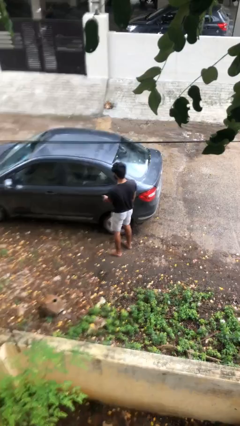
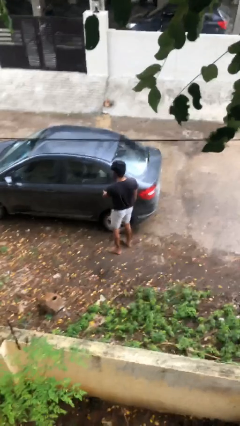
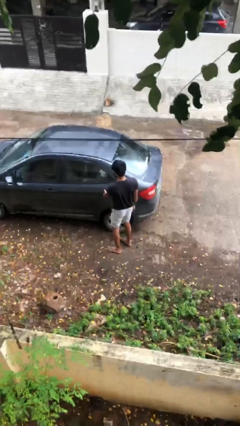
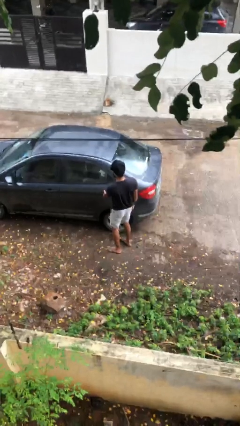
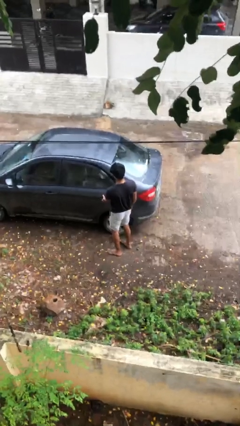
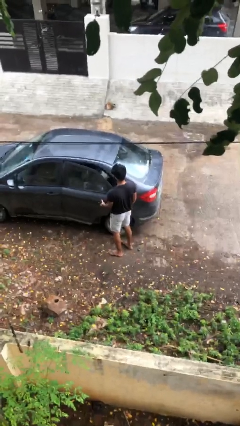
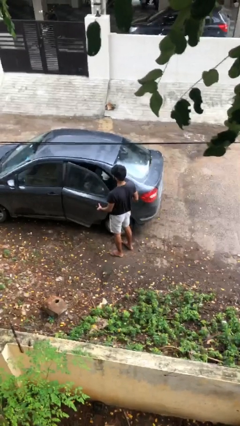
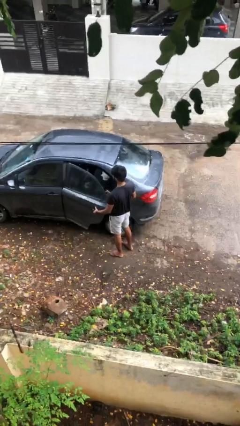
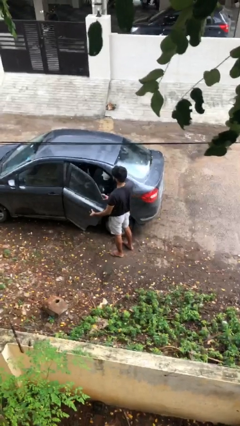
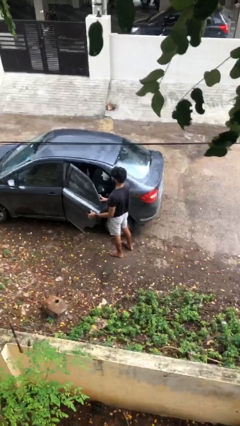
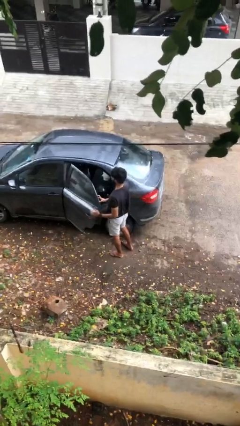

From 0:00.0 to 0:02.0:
person opens car door

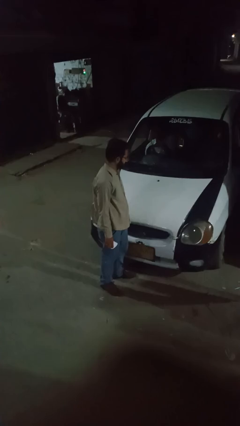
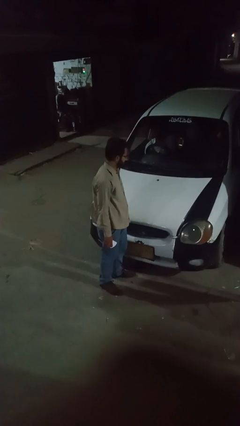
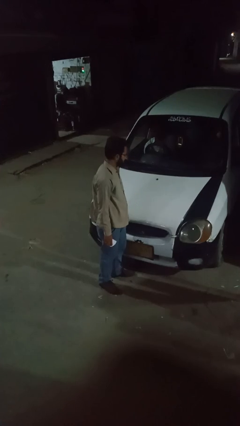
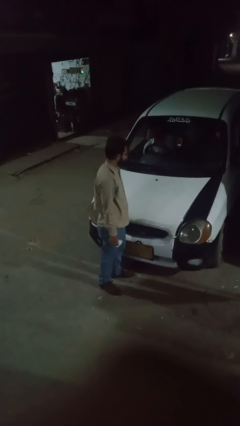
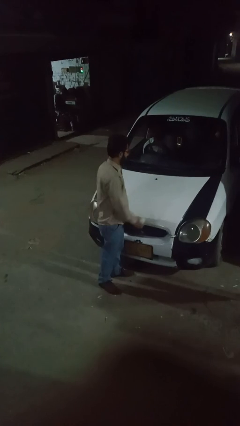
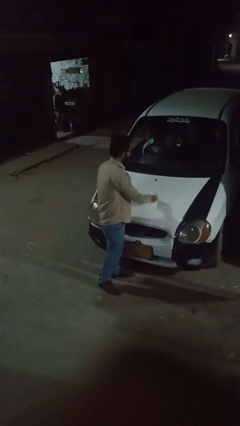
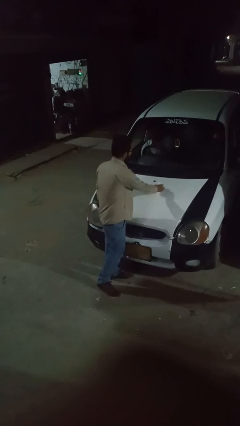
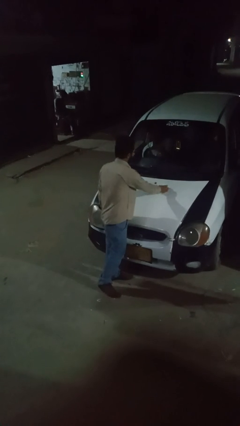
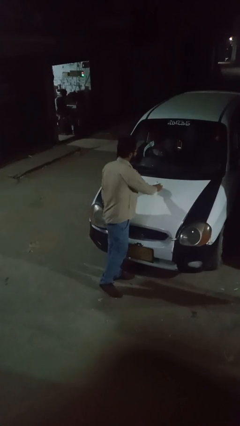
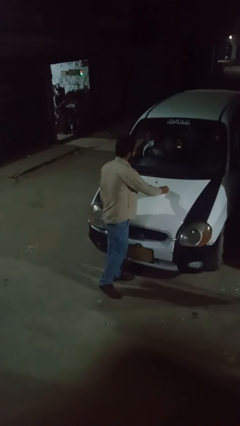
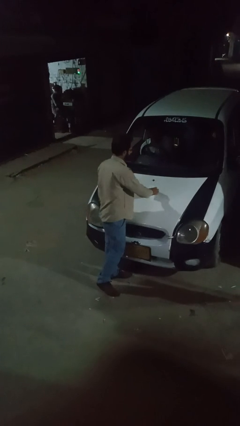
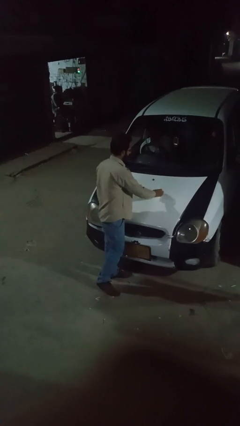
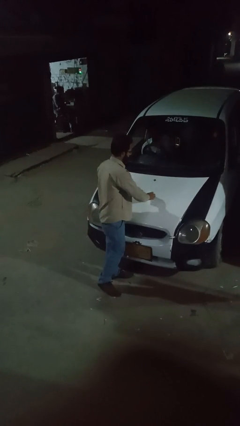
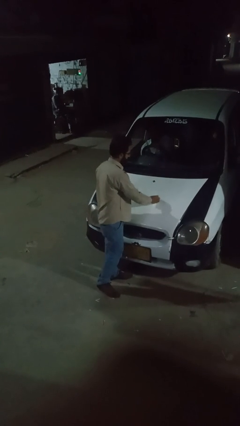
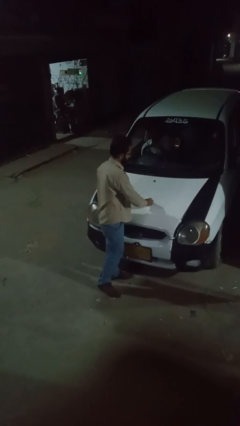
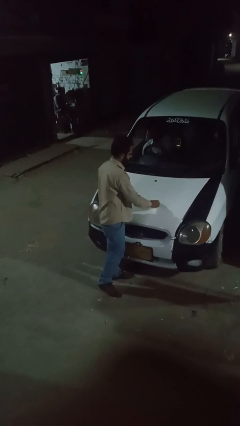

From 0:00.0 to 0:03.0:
person polishes car with rag

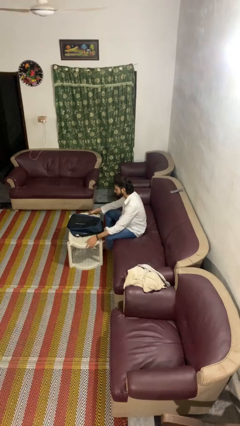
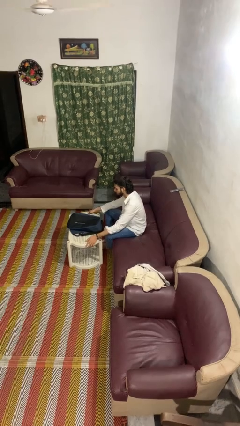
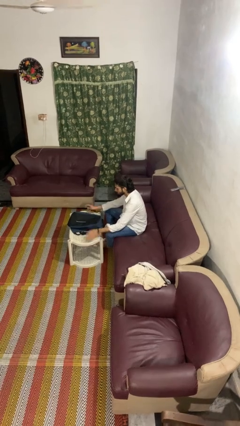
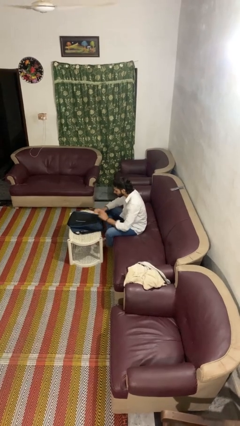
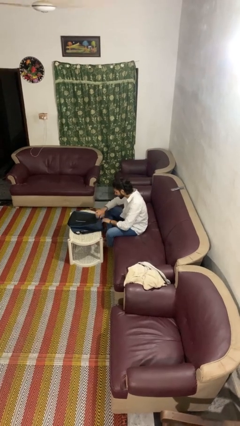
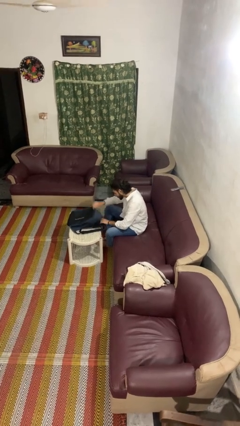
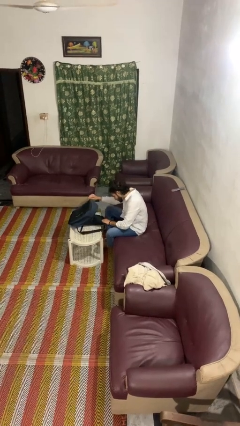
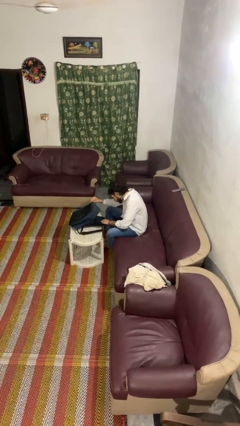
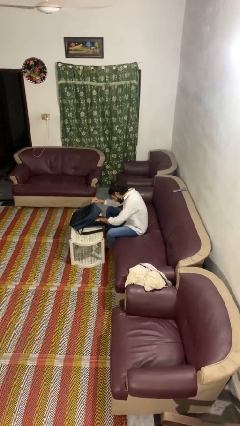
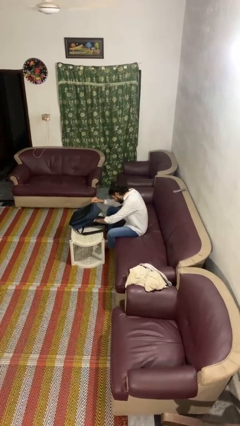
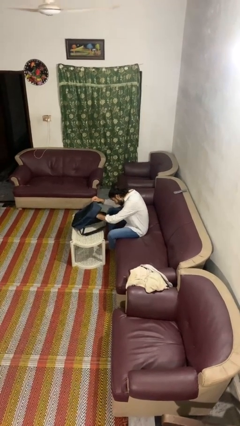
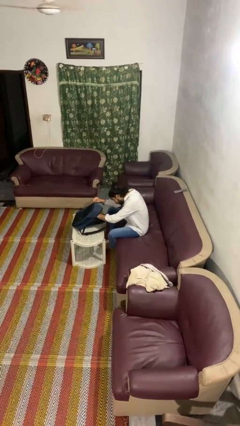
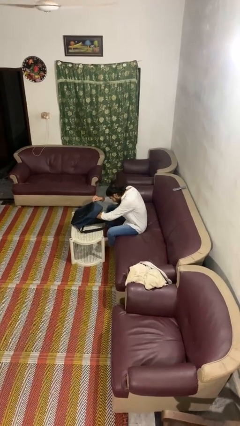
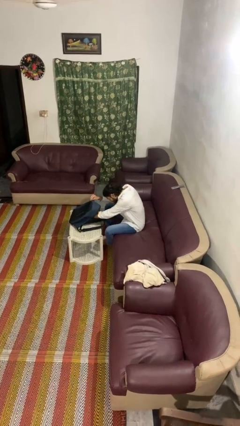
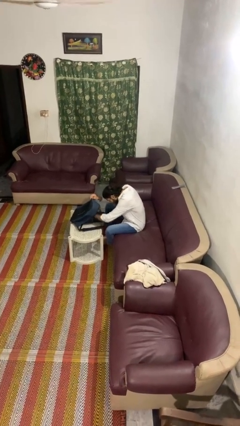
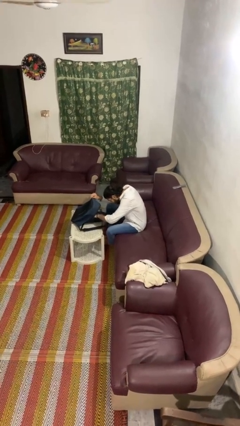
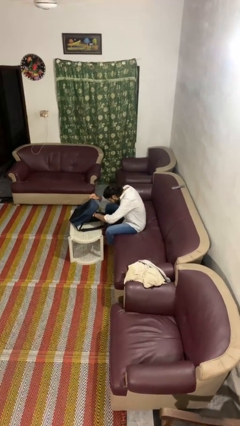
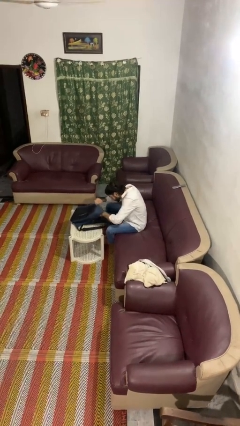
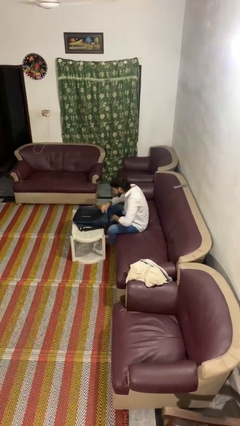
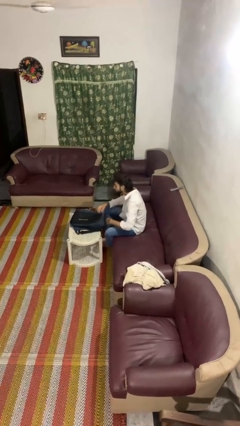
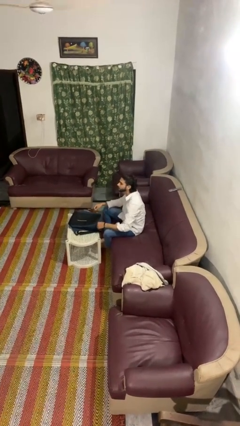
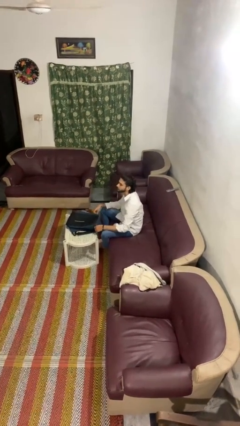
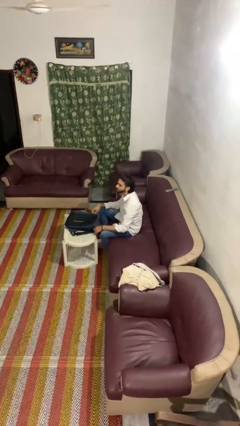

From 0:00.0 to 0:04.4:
person searches in bag

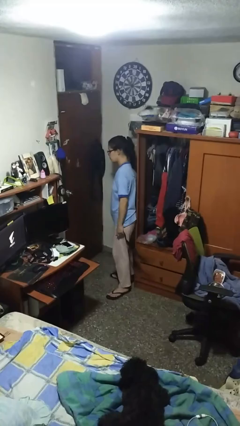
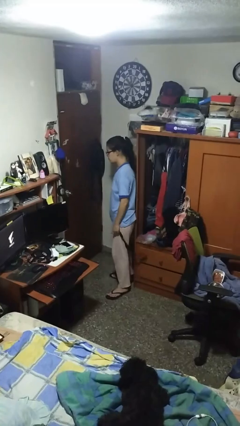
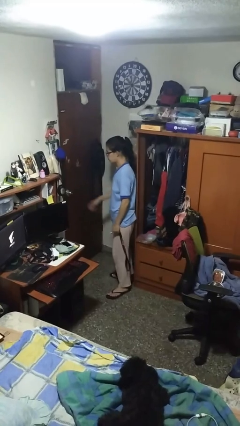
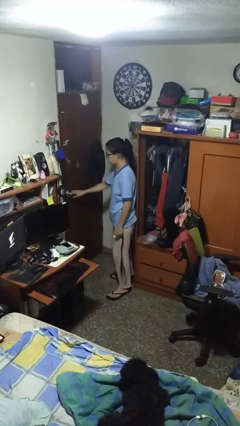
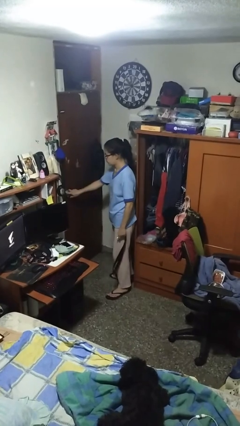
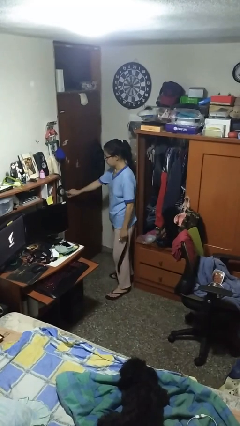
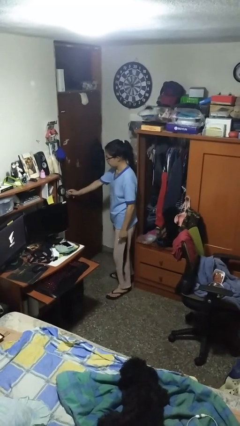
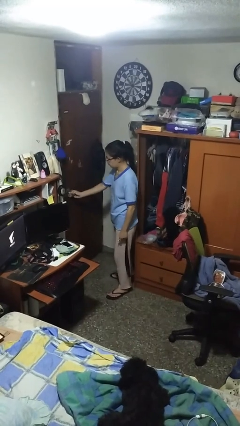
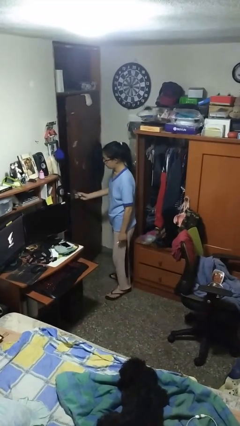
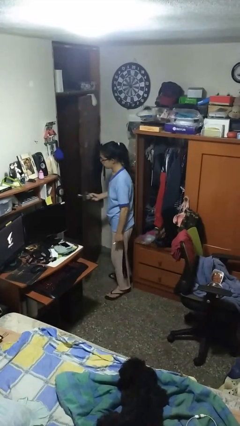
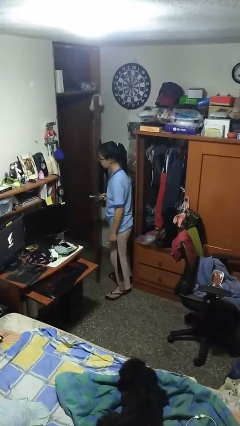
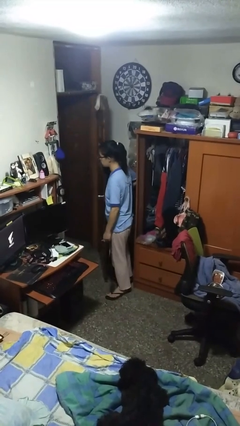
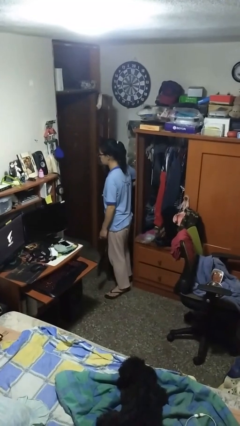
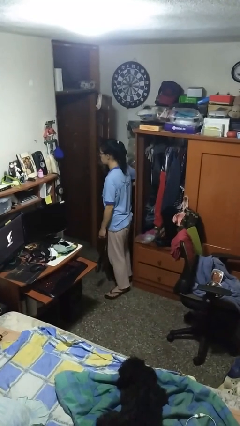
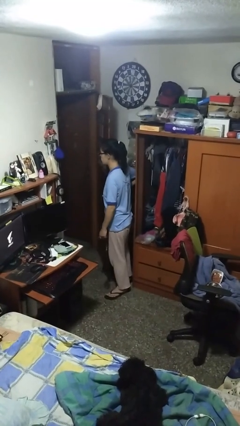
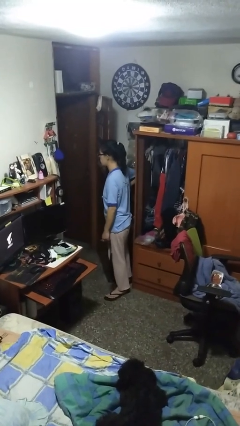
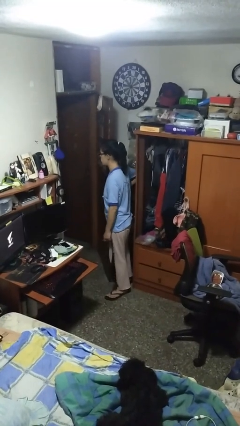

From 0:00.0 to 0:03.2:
person opens facility door

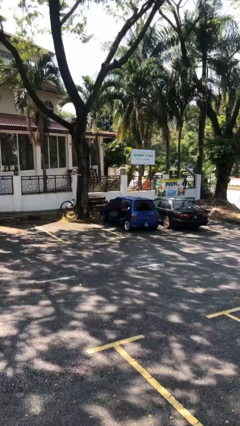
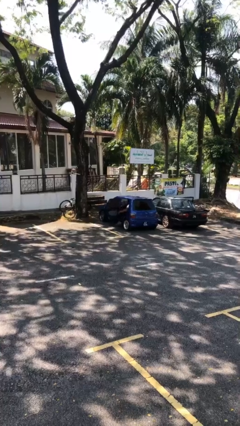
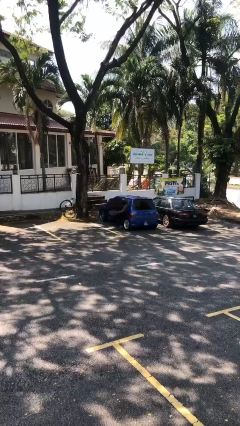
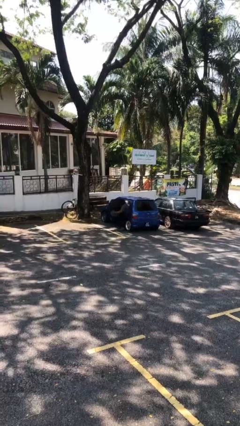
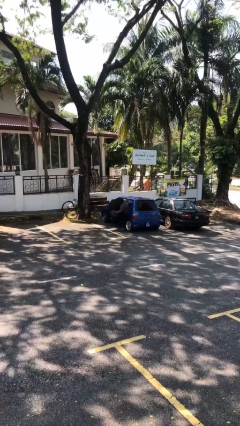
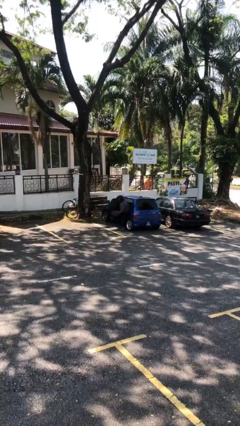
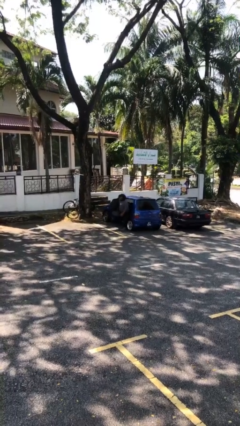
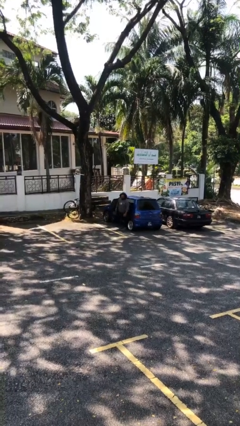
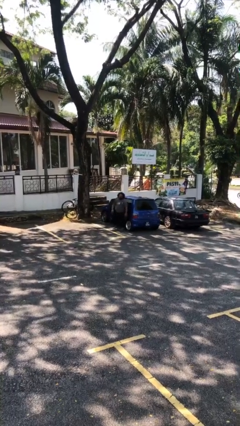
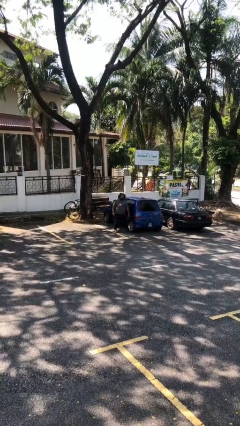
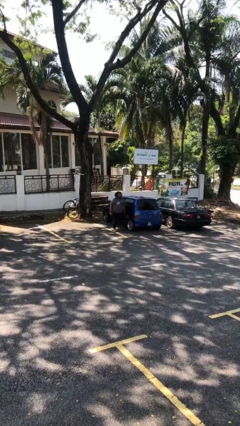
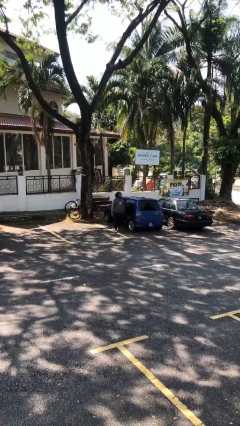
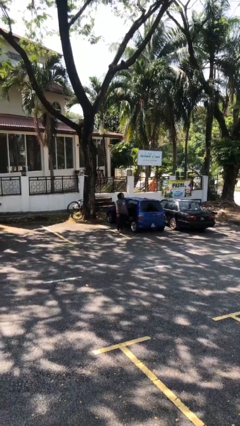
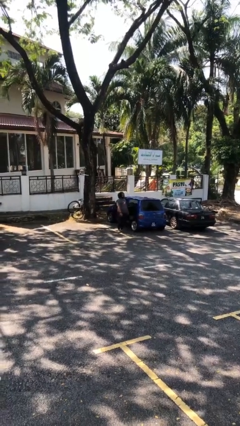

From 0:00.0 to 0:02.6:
person exits car

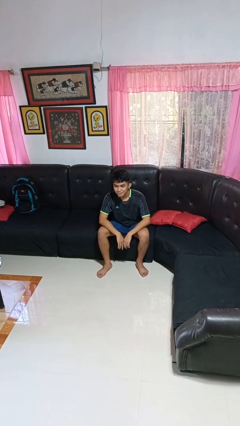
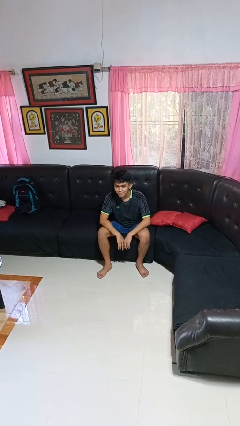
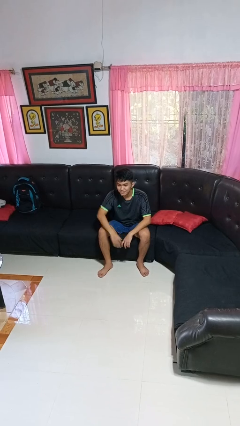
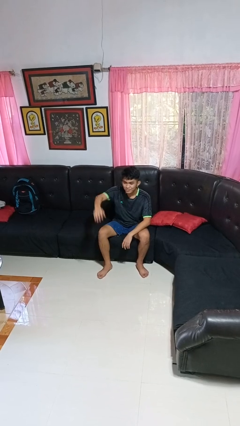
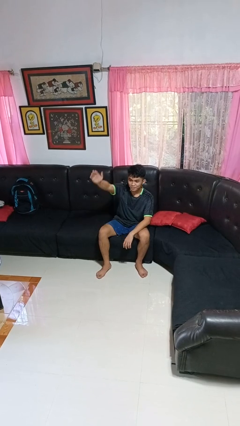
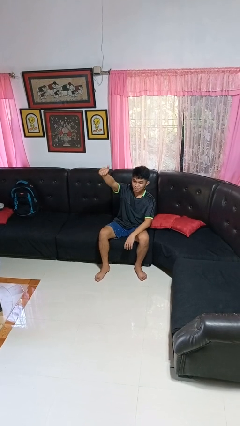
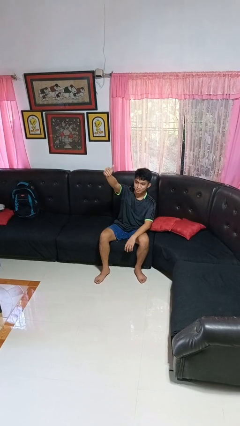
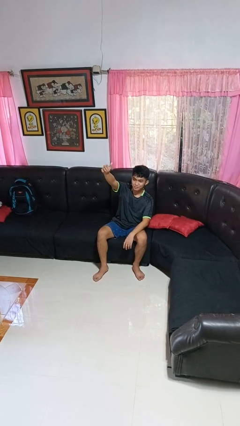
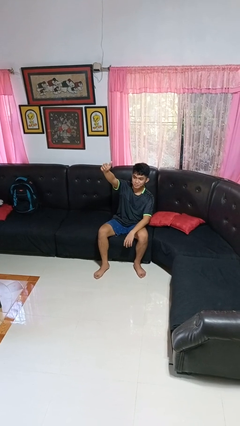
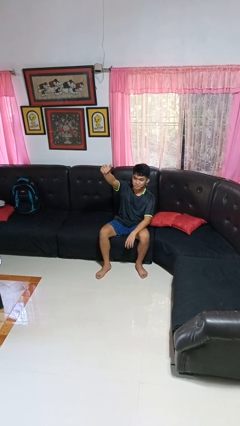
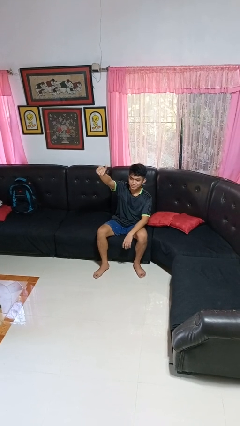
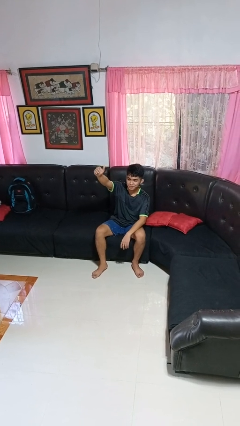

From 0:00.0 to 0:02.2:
person gestures come here

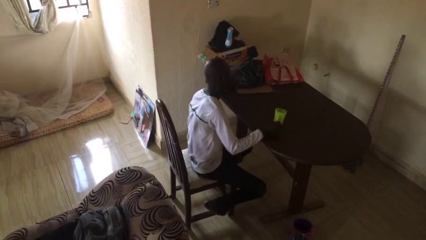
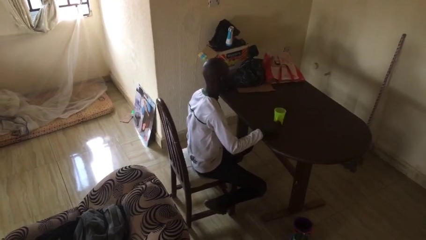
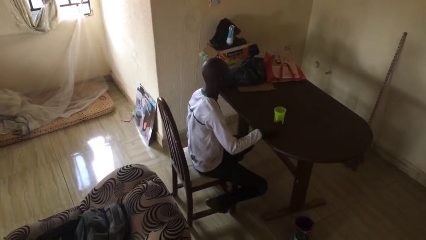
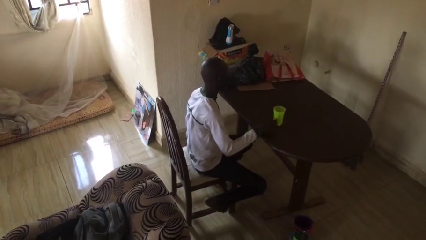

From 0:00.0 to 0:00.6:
person sets upright glass
